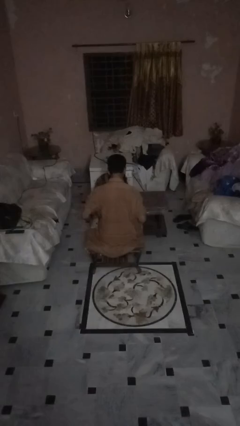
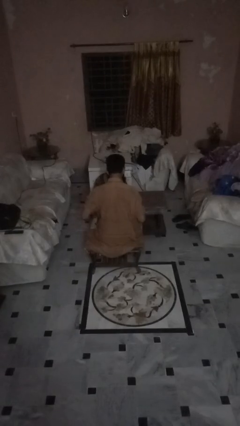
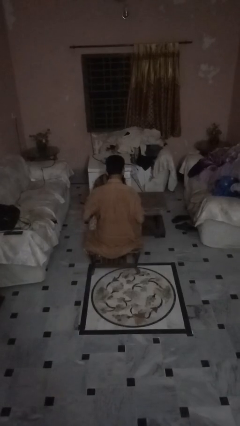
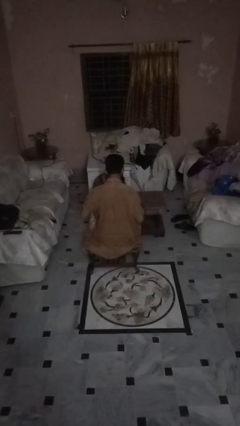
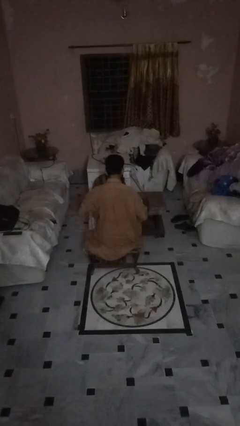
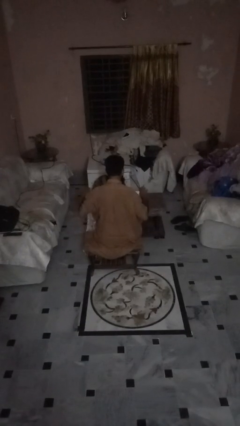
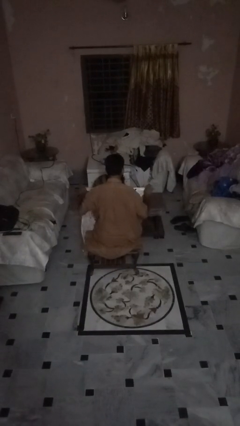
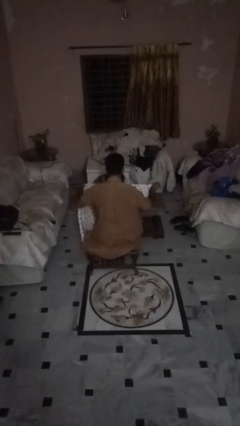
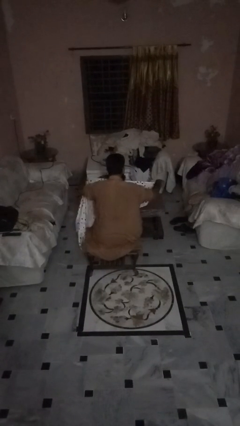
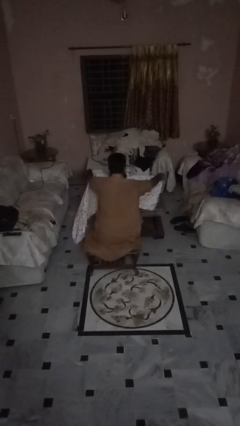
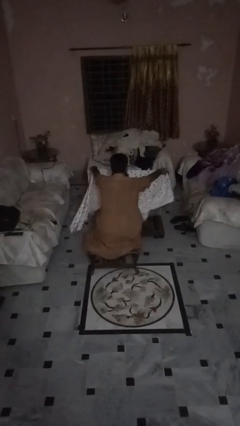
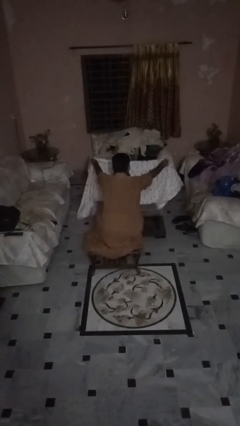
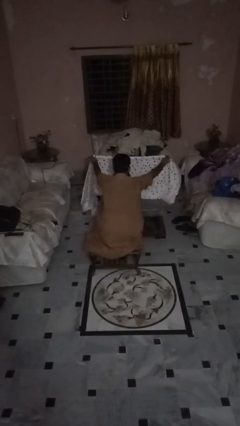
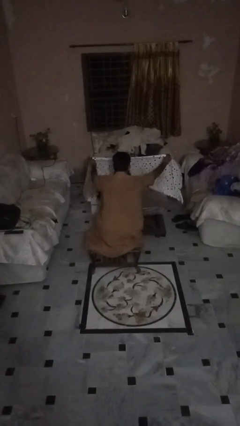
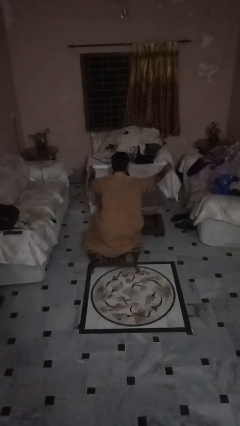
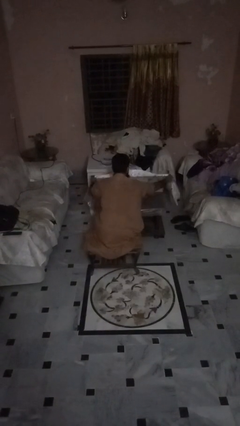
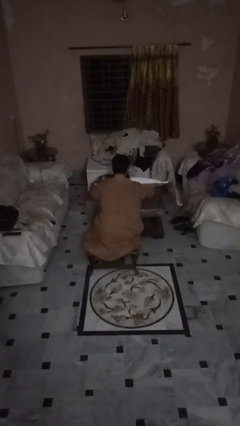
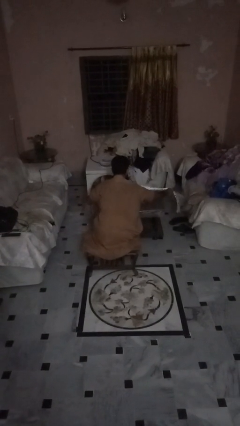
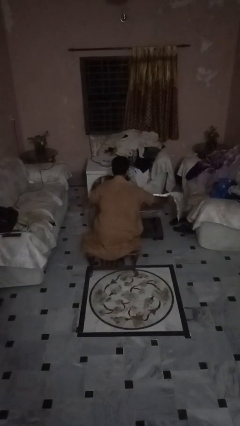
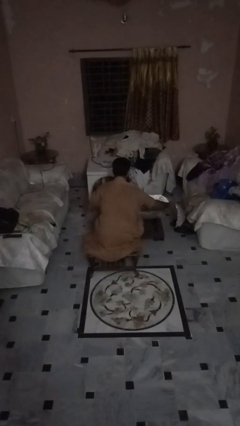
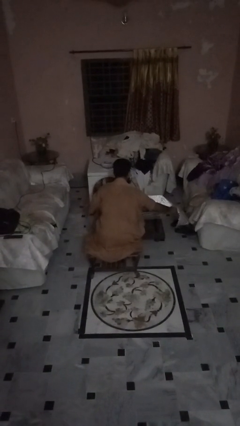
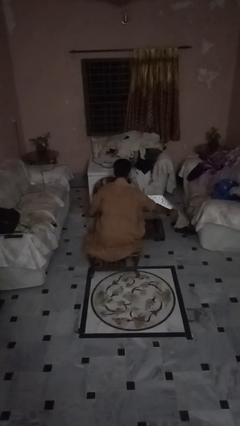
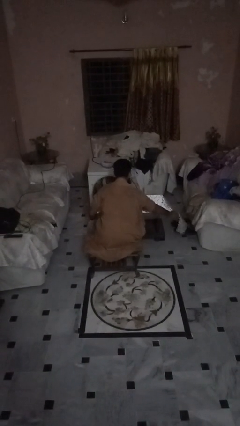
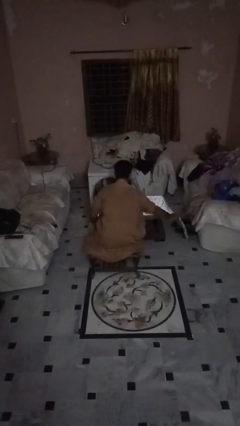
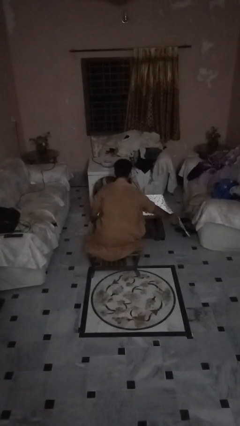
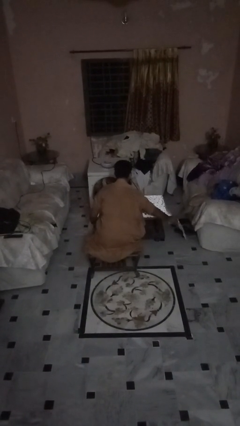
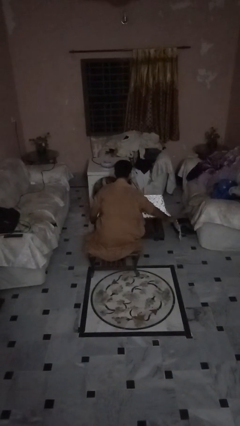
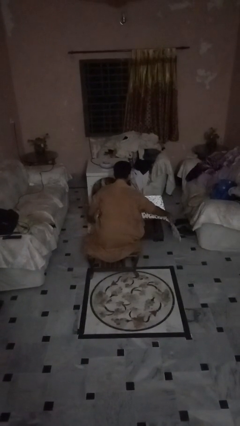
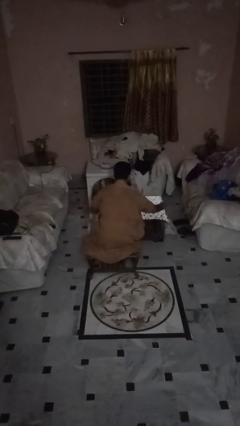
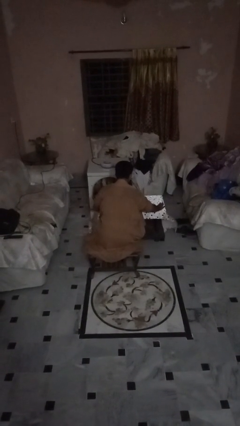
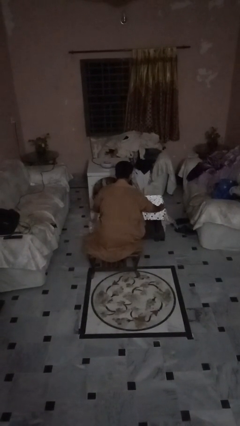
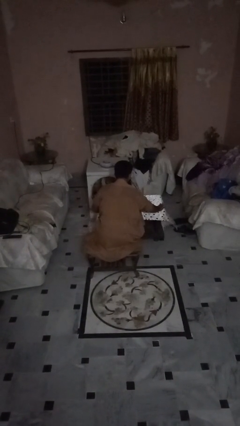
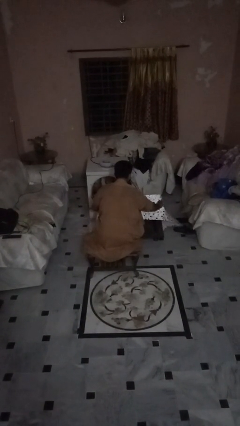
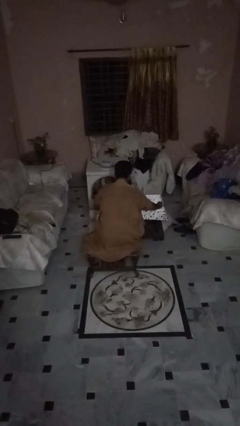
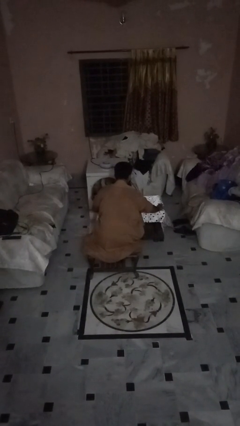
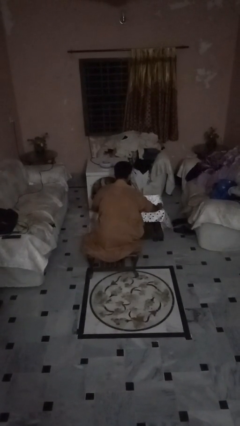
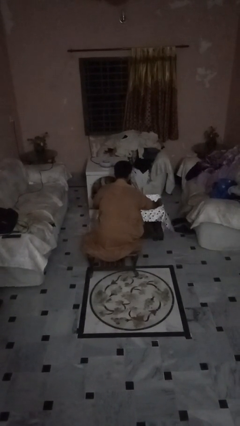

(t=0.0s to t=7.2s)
person spreads tablecloth

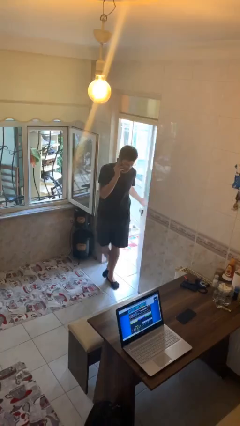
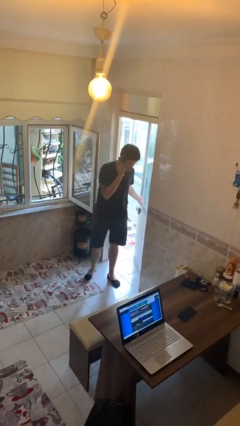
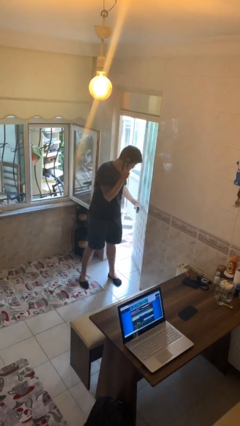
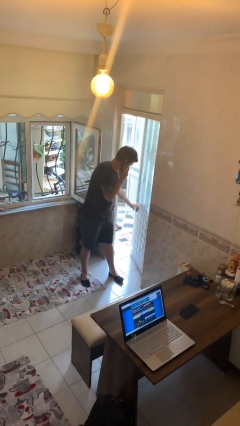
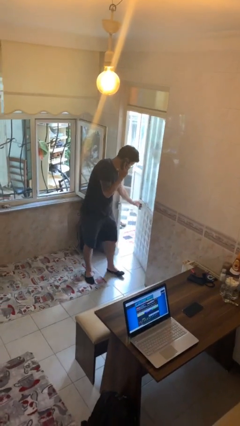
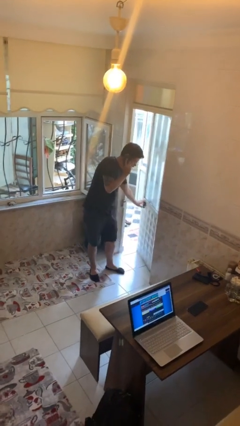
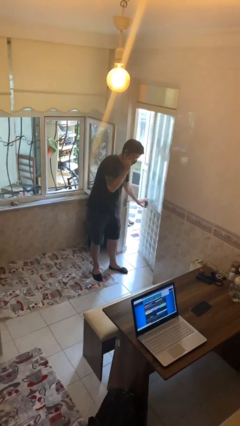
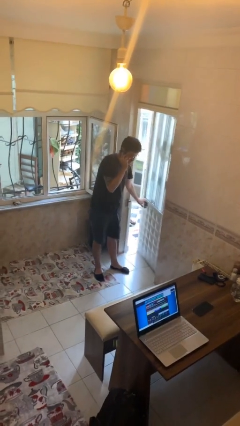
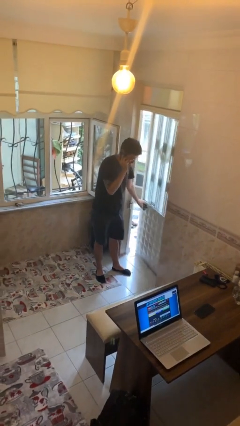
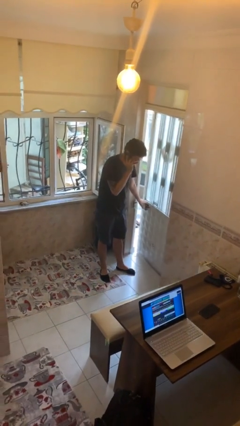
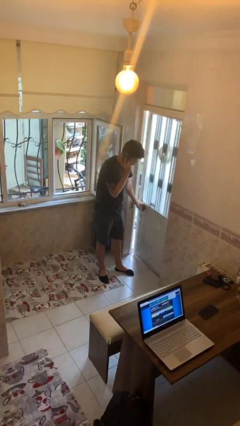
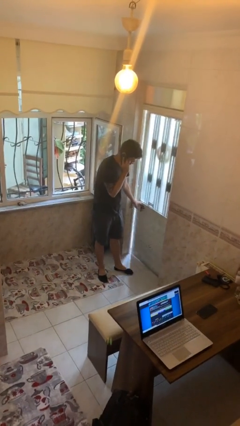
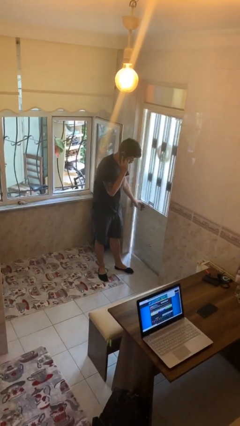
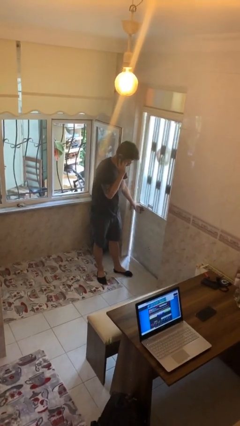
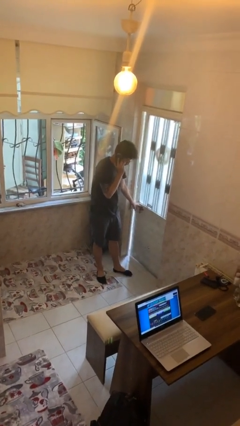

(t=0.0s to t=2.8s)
person closes facility door

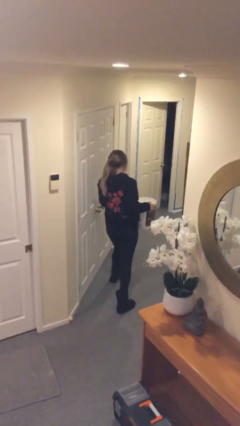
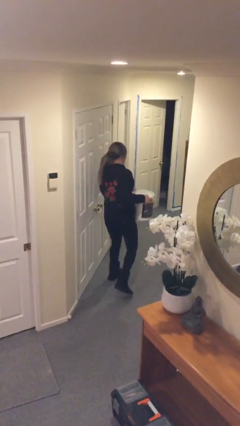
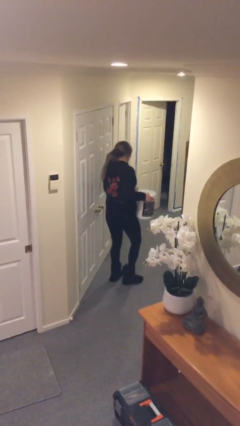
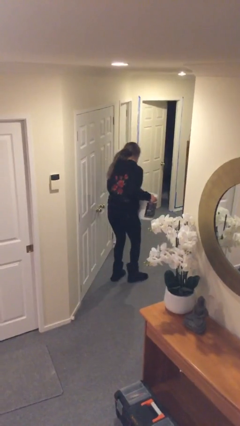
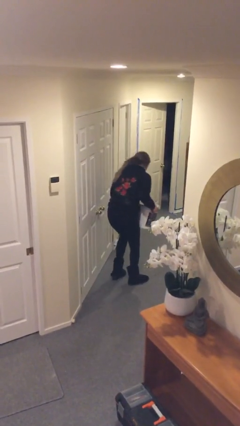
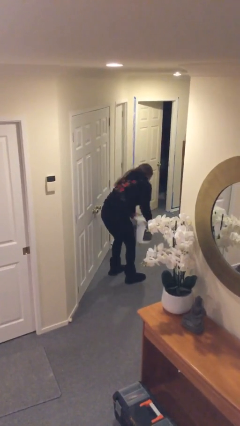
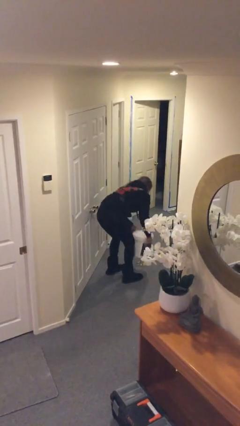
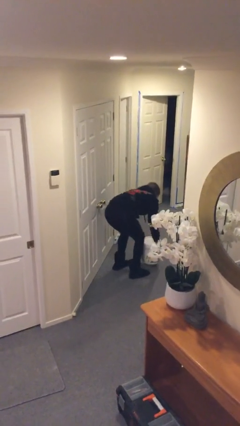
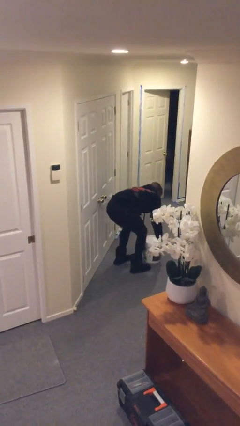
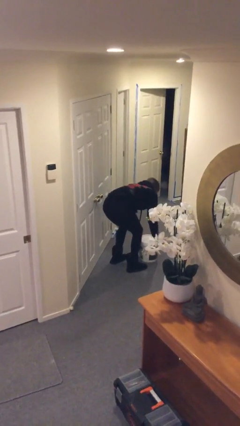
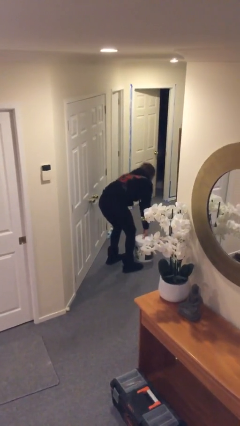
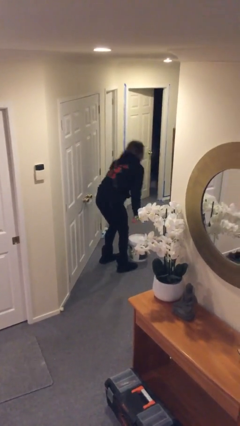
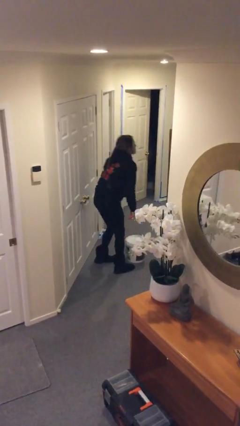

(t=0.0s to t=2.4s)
person puts down object on floor

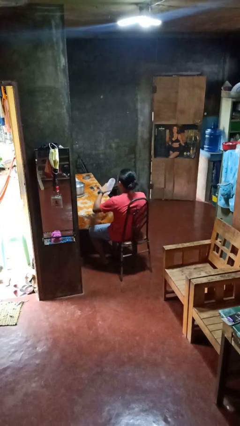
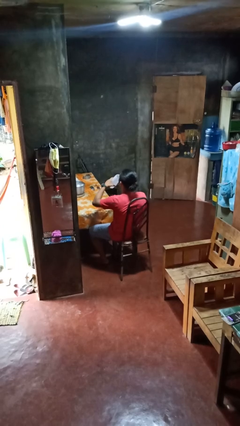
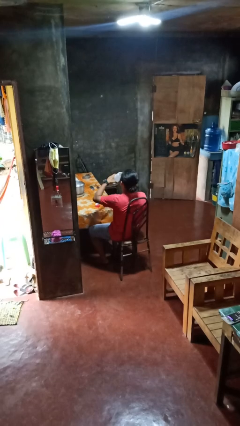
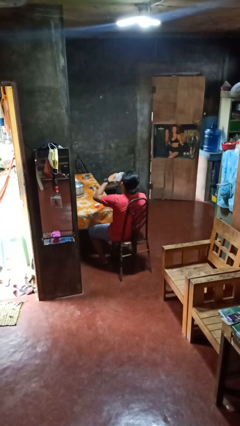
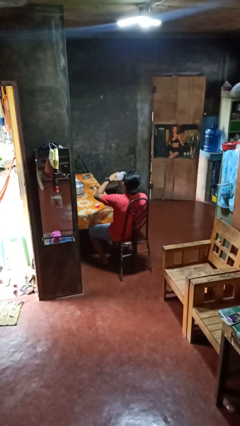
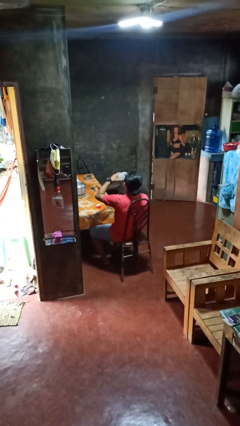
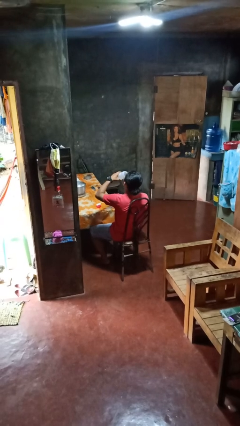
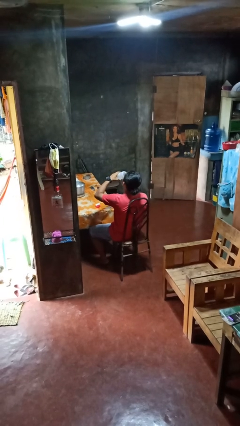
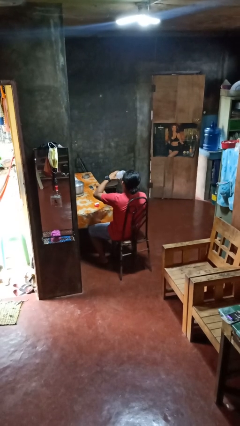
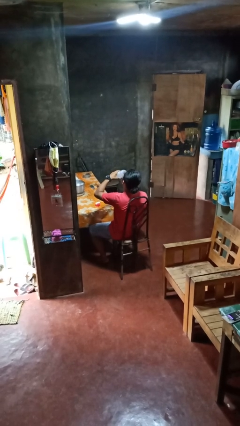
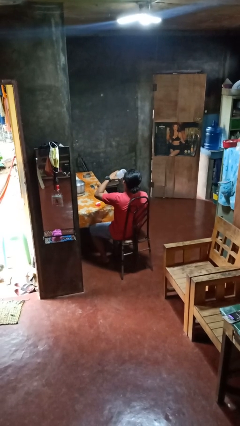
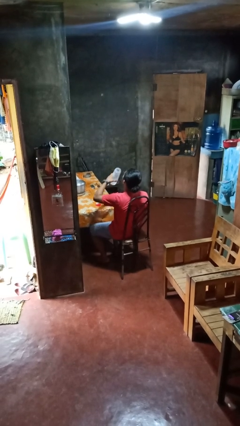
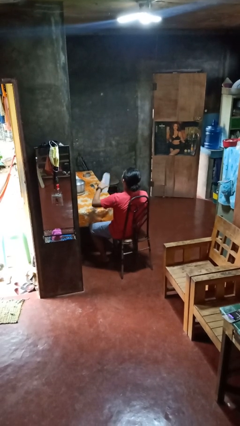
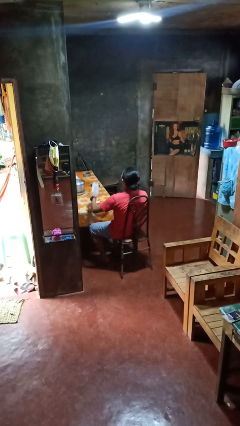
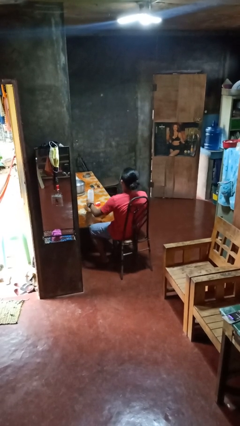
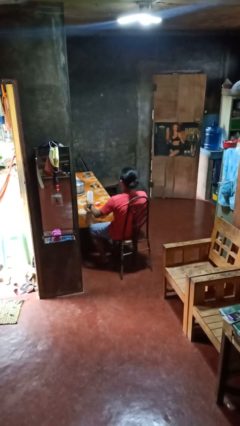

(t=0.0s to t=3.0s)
person drinks from bottle

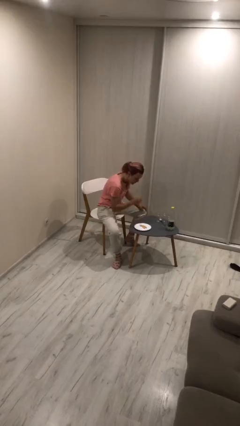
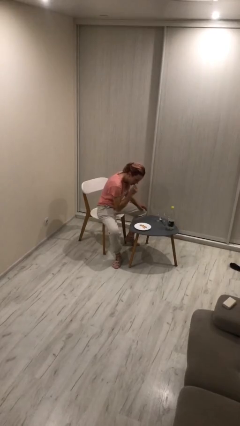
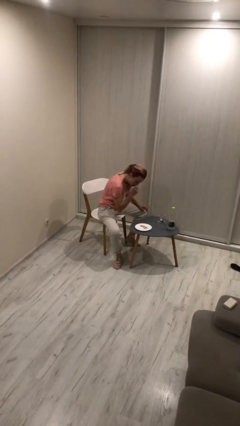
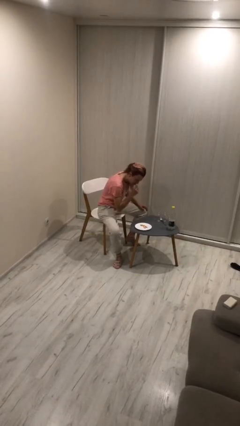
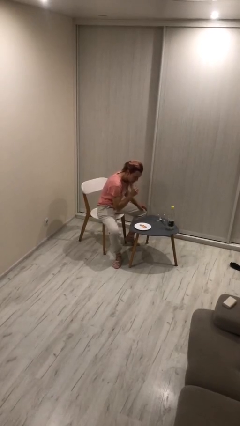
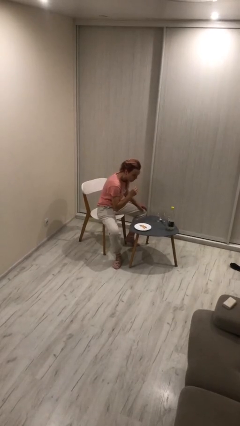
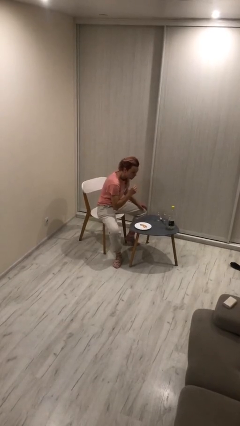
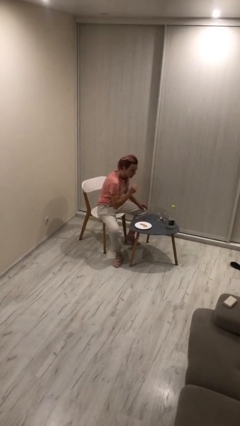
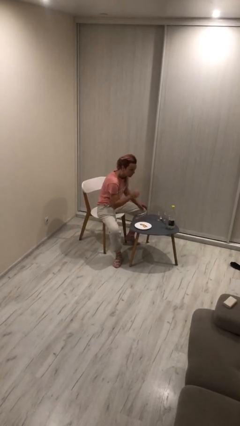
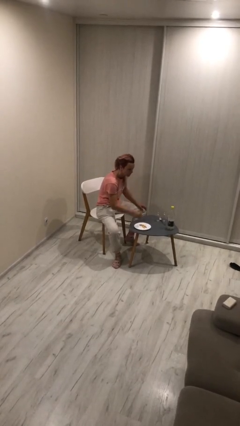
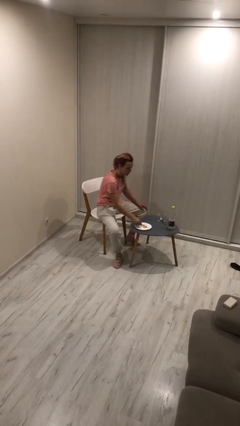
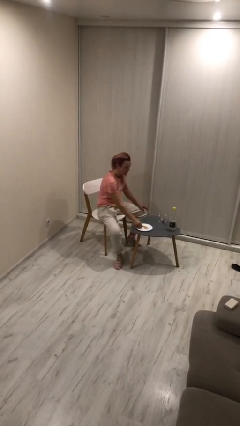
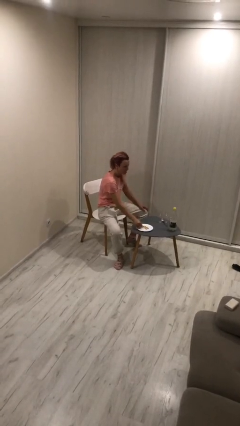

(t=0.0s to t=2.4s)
person eats with hands
